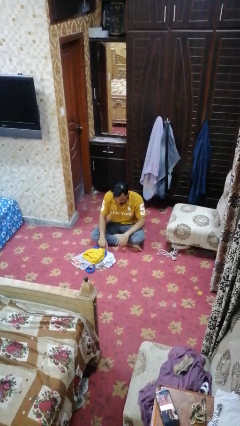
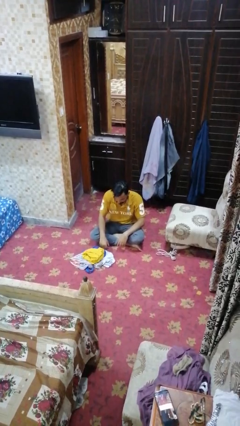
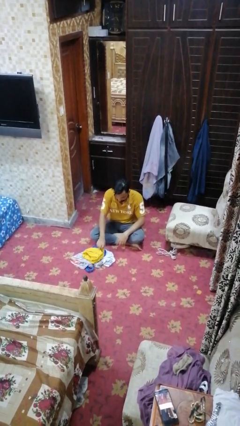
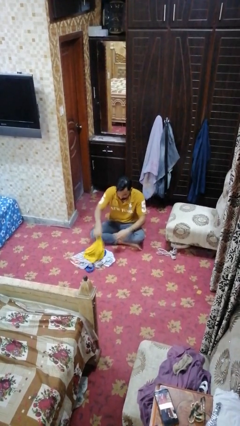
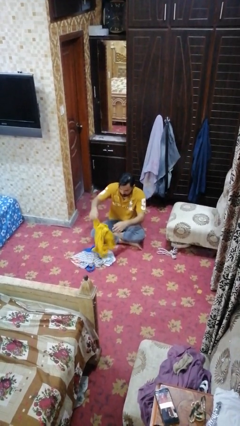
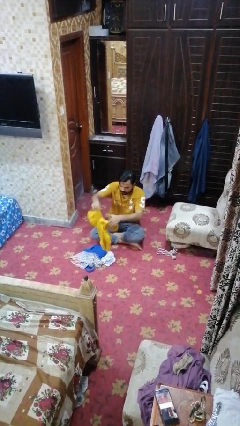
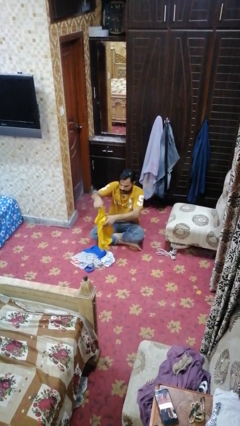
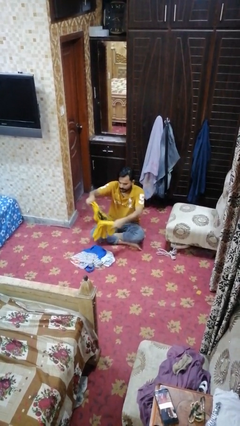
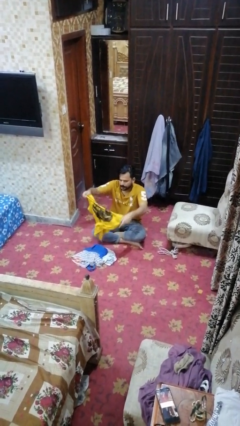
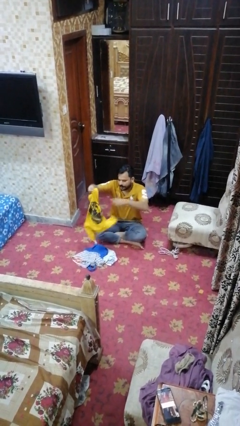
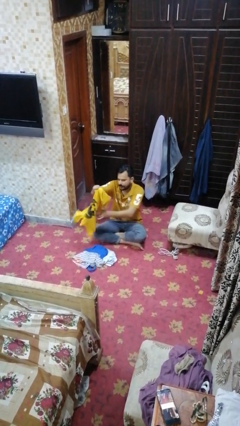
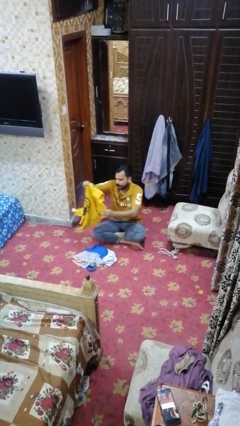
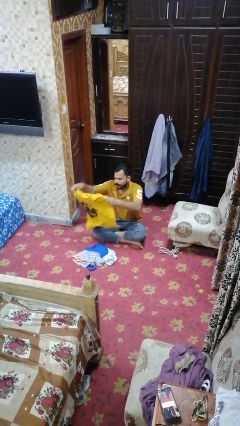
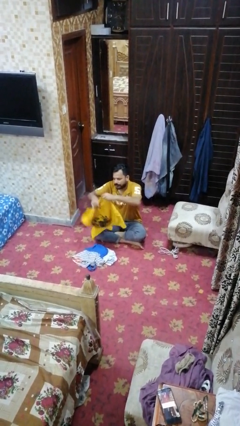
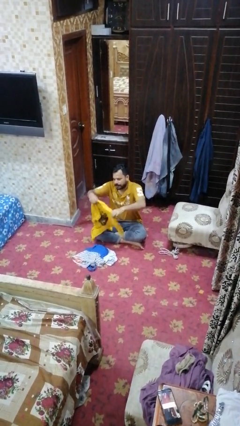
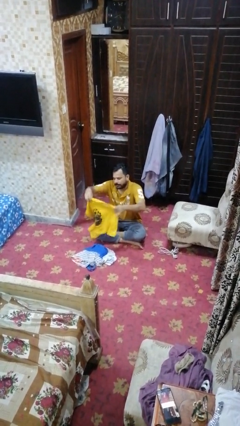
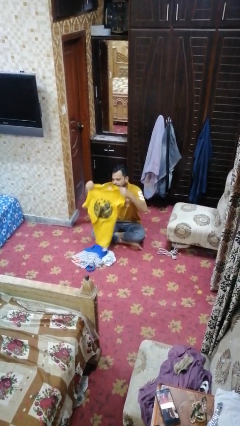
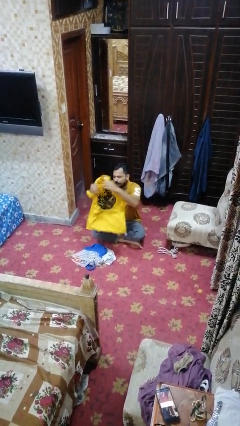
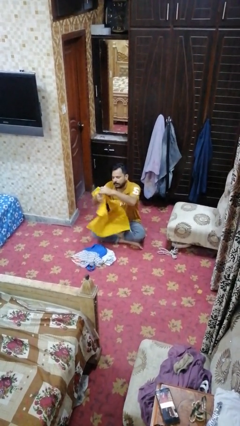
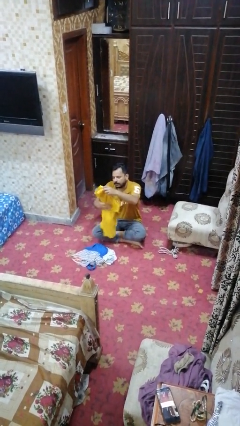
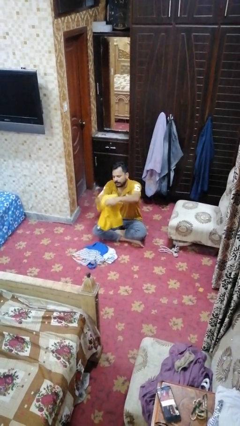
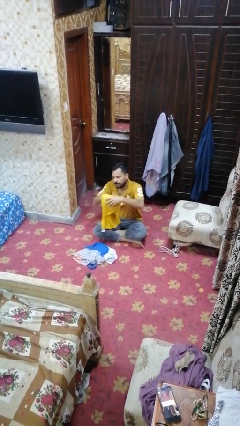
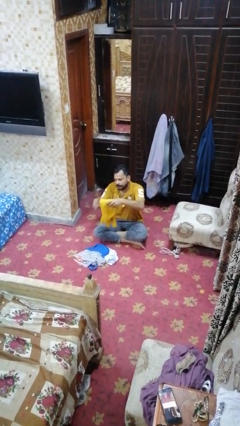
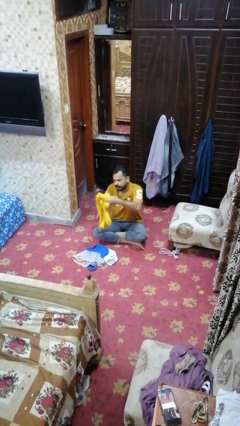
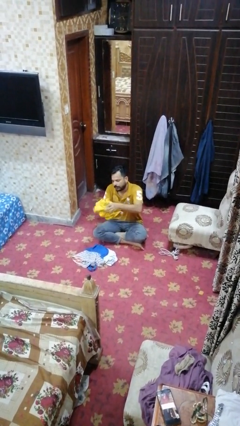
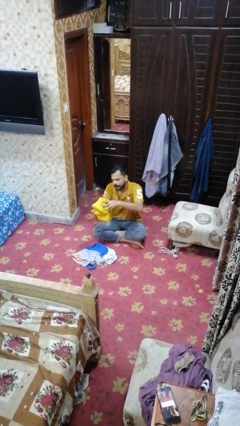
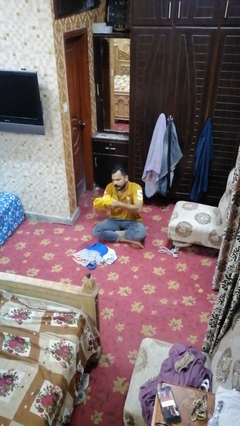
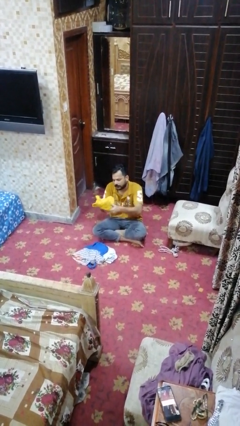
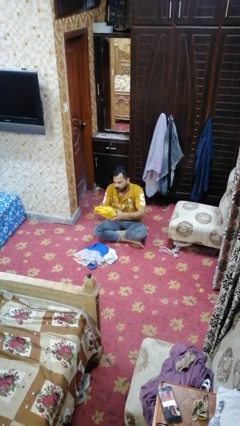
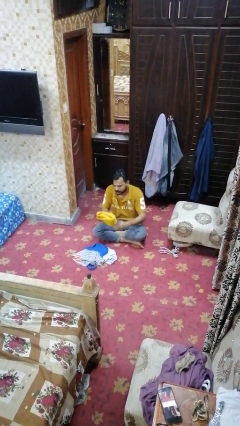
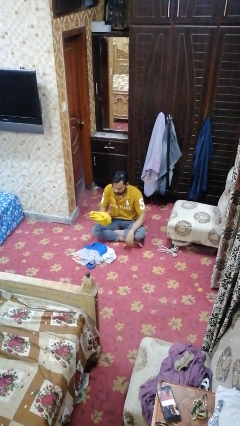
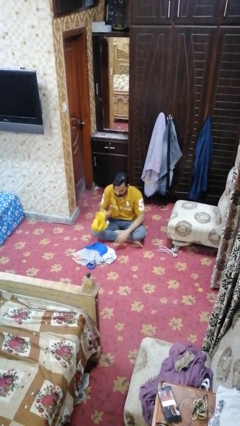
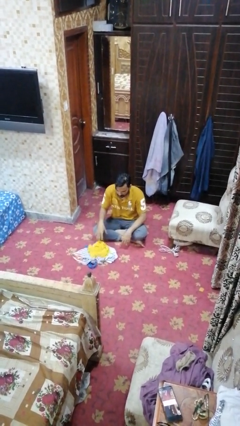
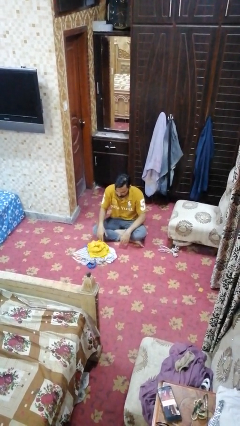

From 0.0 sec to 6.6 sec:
person folds shirt

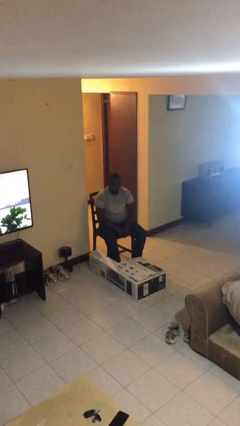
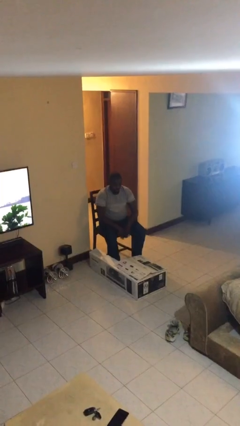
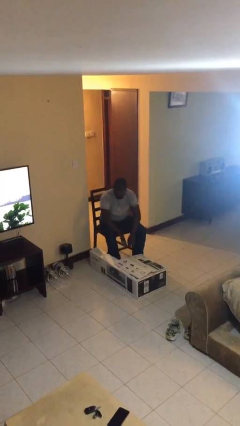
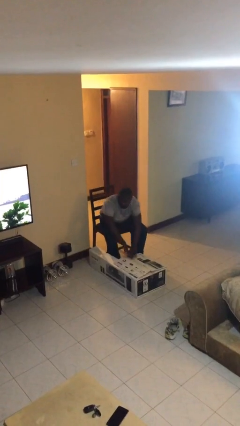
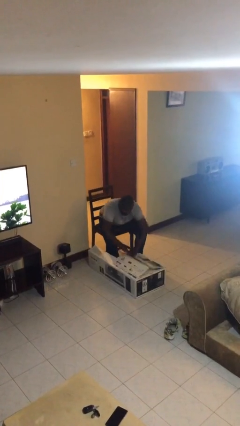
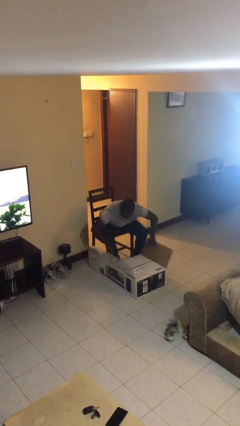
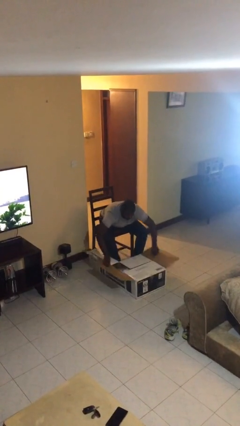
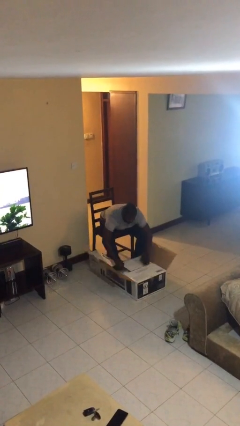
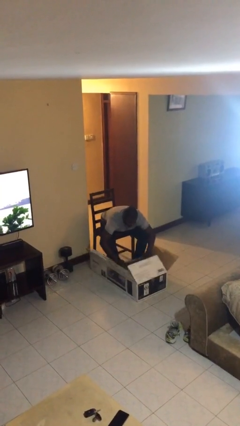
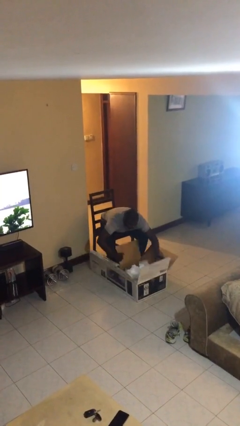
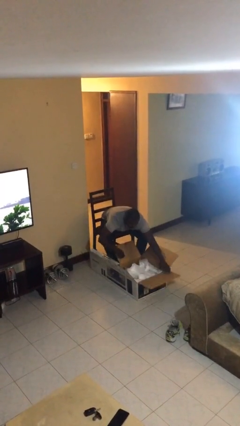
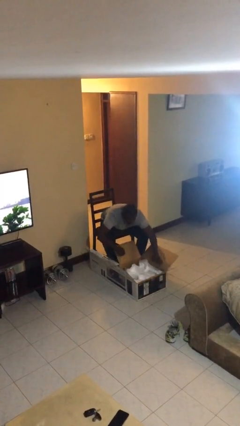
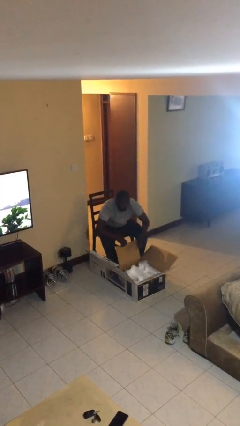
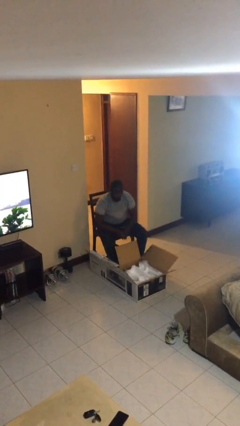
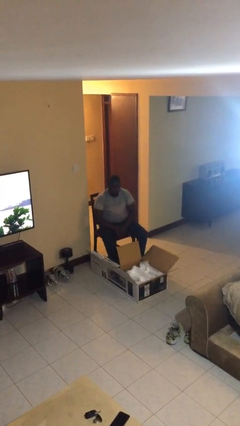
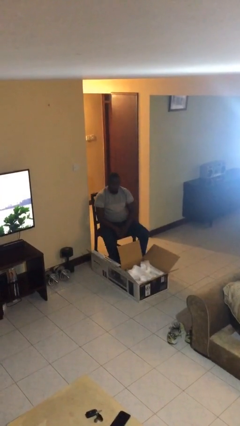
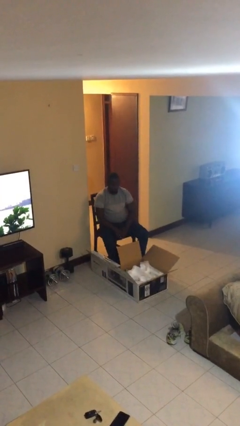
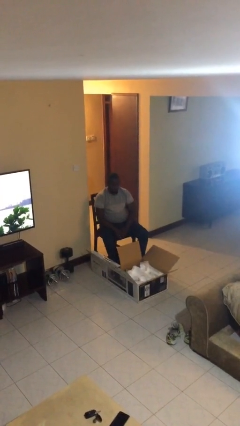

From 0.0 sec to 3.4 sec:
person opens box

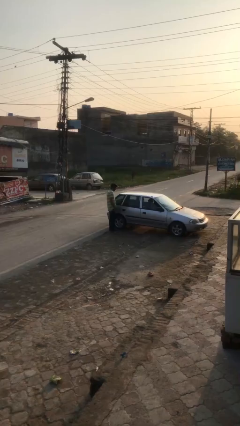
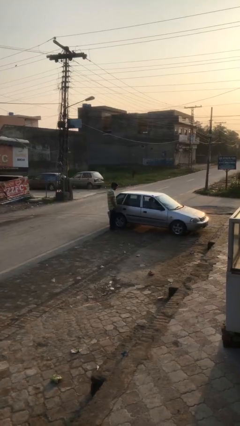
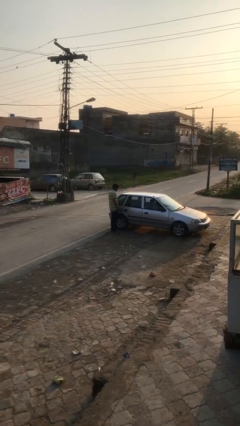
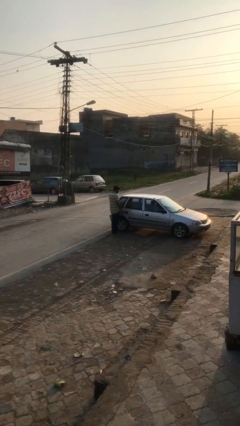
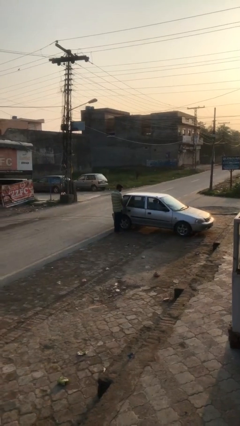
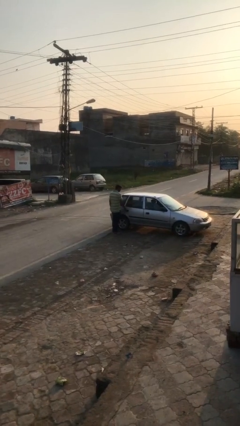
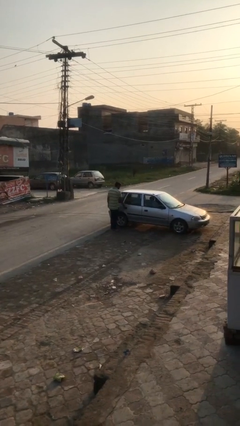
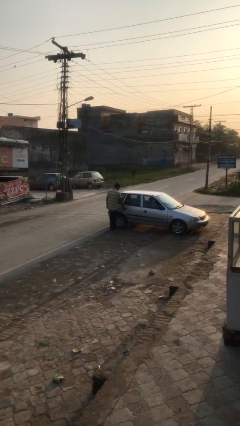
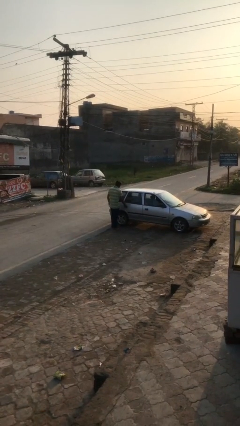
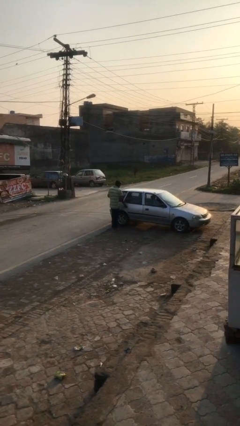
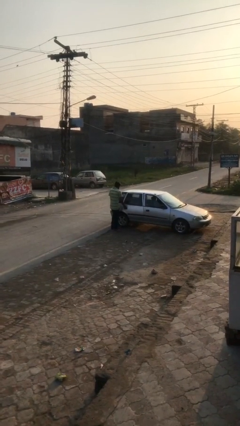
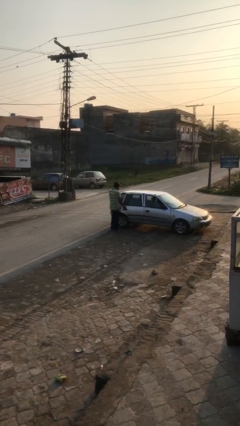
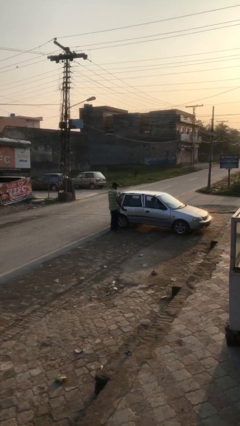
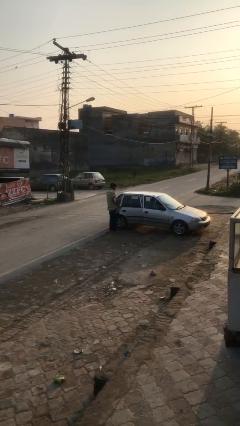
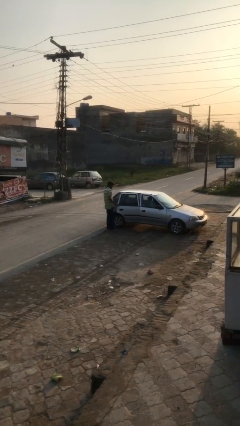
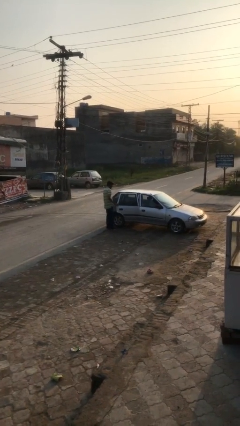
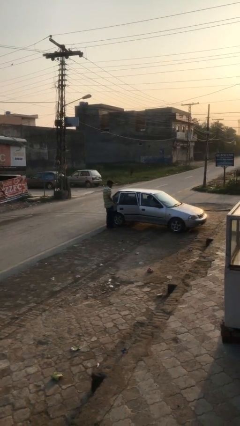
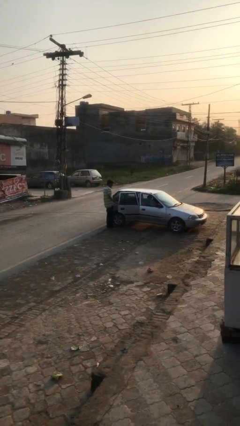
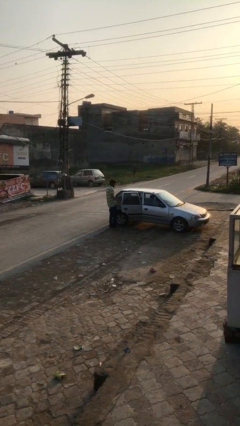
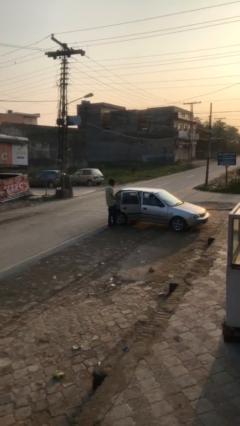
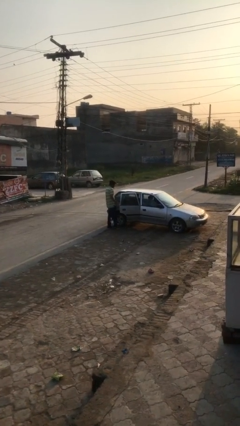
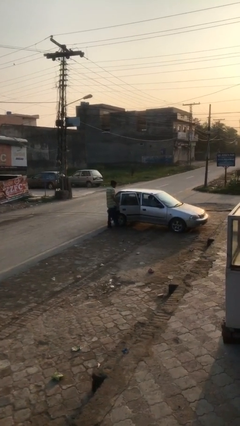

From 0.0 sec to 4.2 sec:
person opens car door

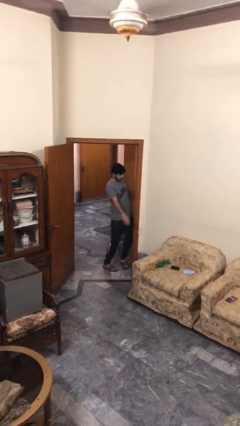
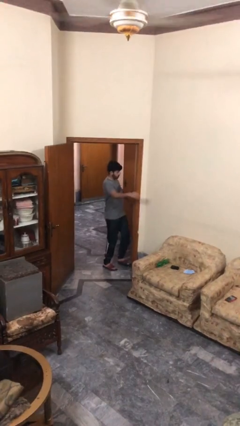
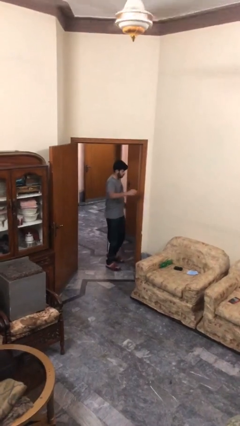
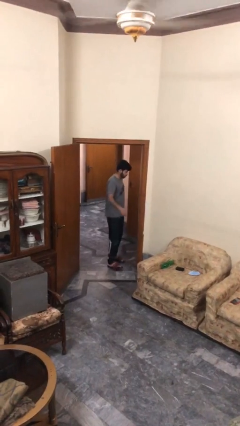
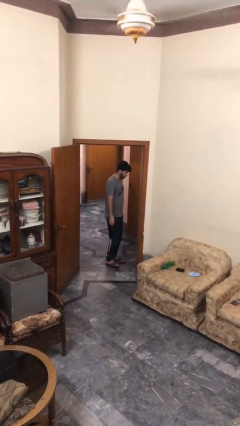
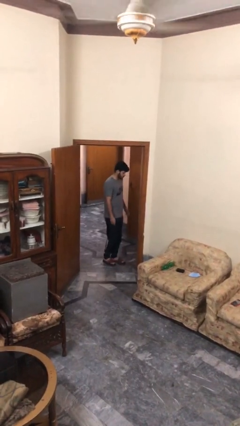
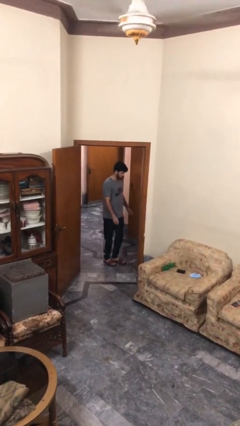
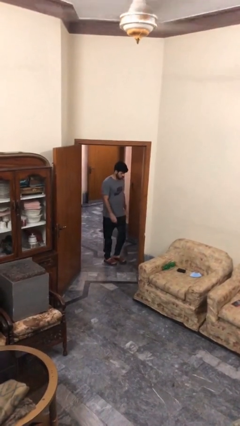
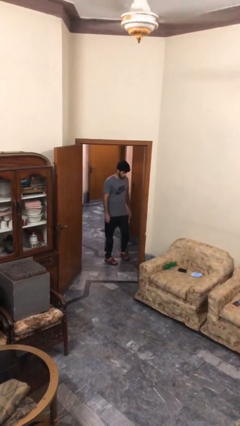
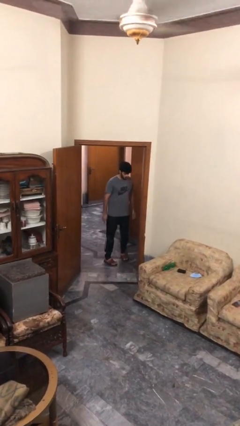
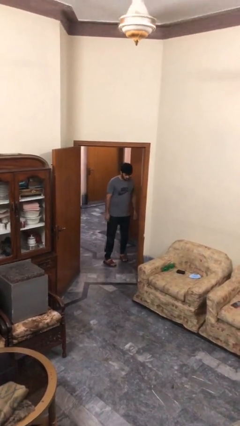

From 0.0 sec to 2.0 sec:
person bumps into wall

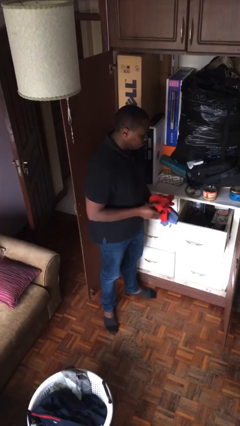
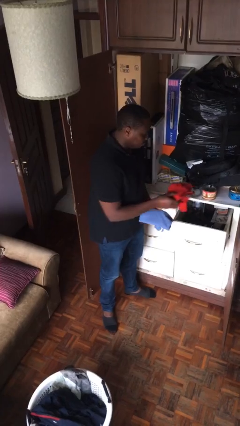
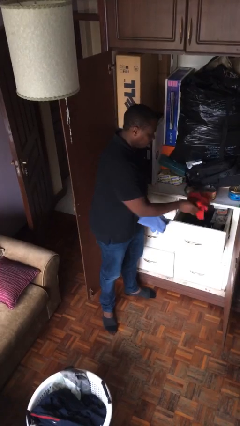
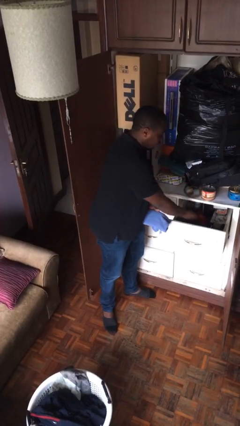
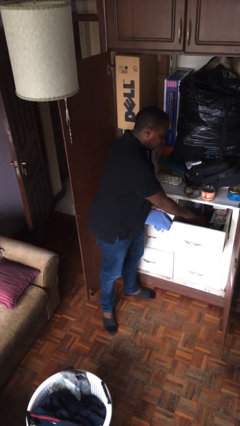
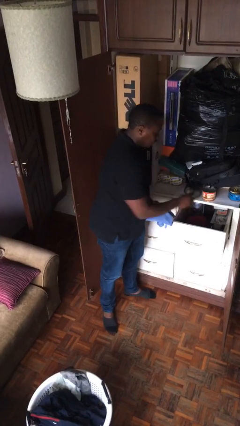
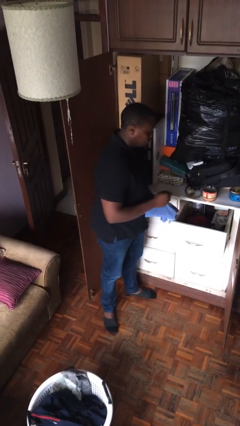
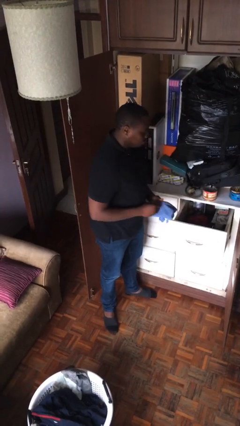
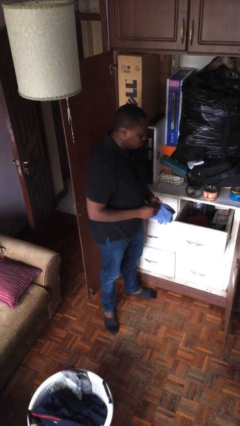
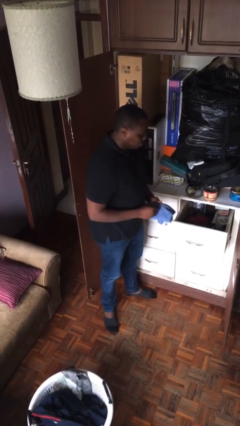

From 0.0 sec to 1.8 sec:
person puts clothes into dresser
